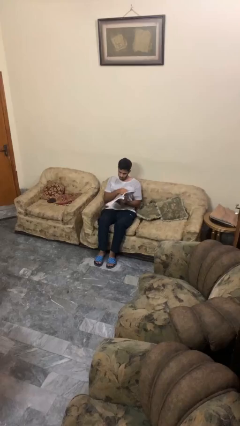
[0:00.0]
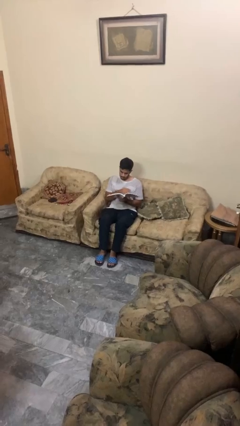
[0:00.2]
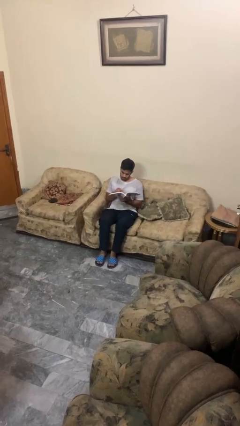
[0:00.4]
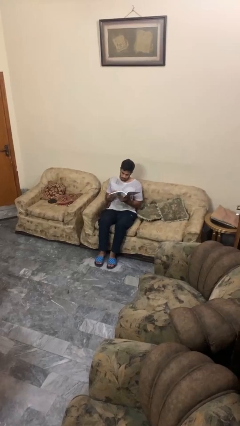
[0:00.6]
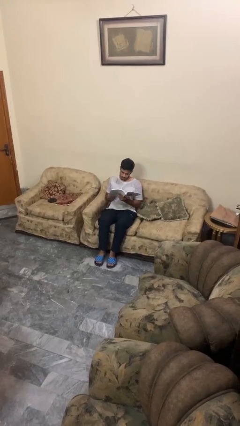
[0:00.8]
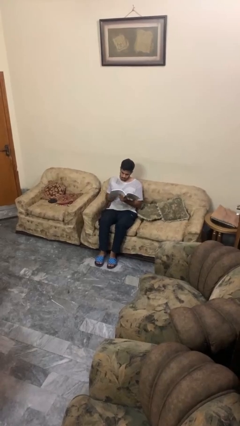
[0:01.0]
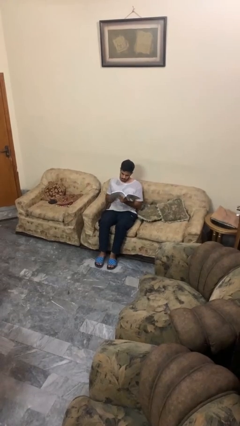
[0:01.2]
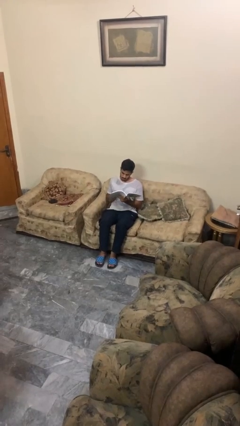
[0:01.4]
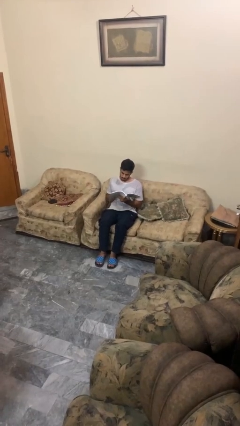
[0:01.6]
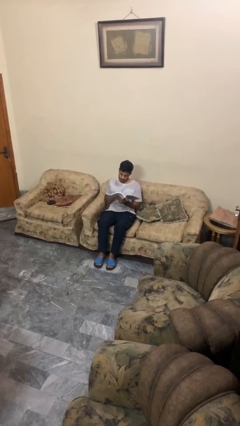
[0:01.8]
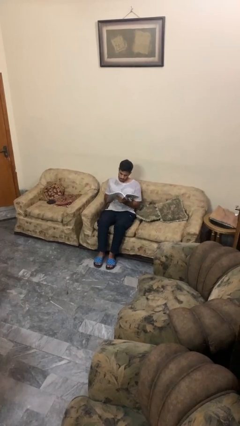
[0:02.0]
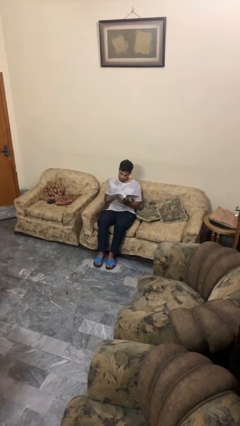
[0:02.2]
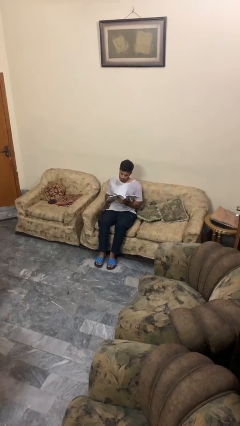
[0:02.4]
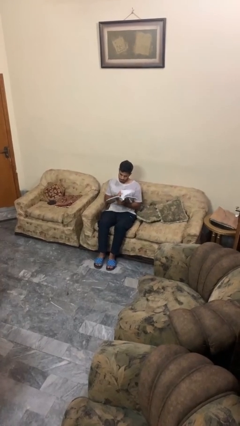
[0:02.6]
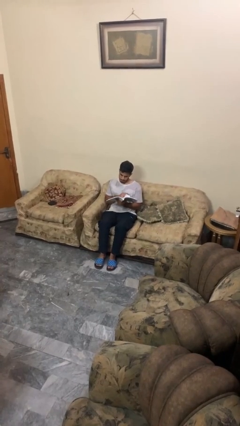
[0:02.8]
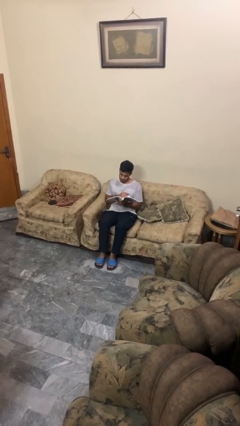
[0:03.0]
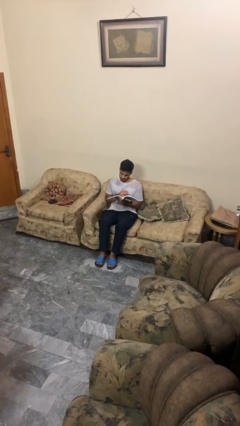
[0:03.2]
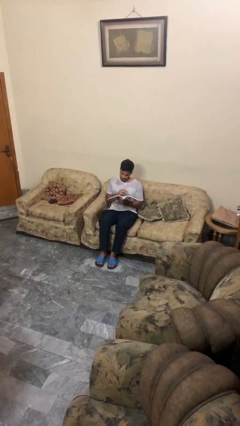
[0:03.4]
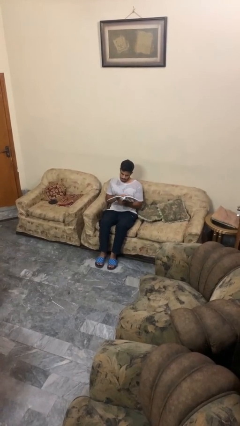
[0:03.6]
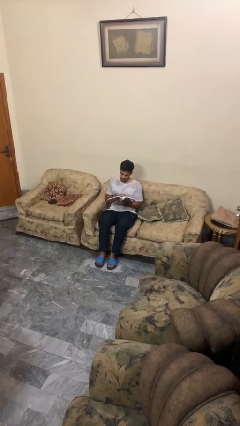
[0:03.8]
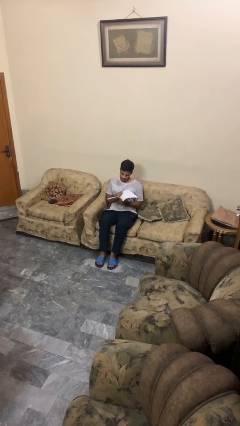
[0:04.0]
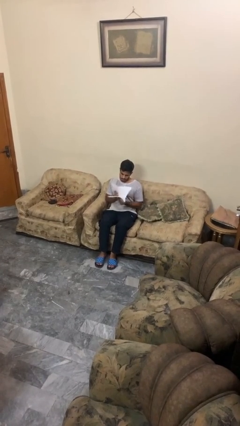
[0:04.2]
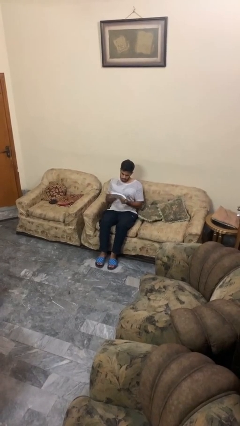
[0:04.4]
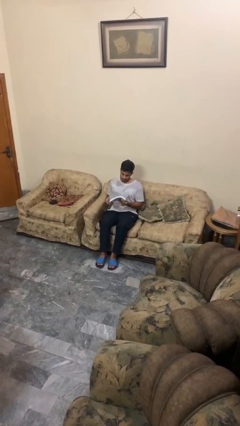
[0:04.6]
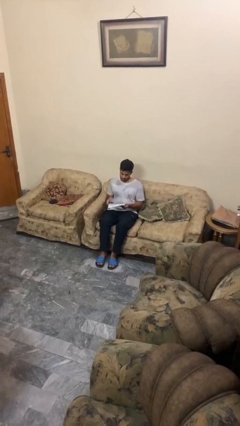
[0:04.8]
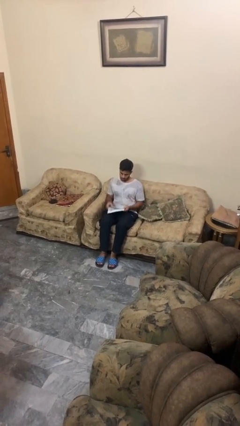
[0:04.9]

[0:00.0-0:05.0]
person reads book

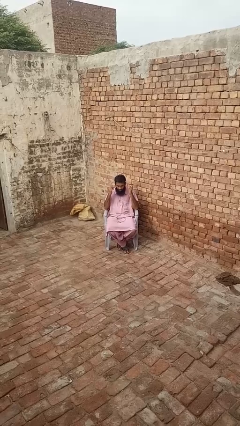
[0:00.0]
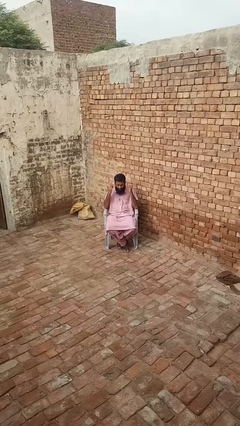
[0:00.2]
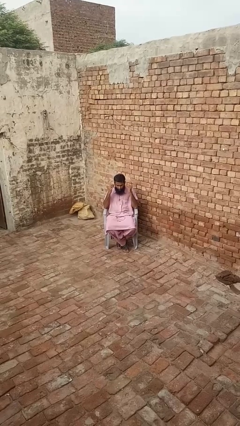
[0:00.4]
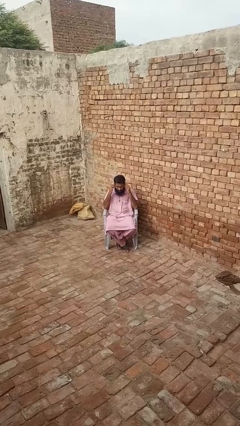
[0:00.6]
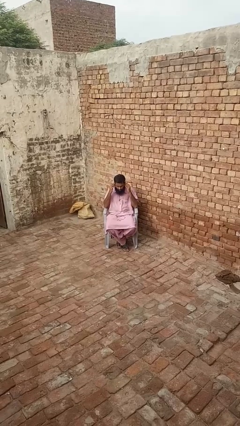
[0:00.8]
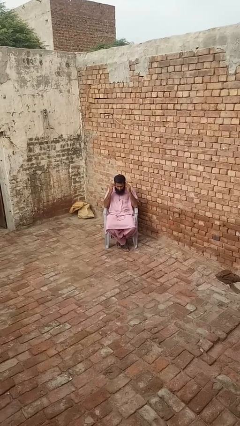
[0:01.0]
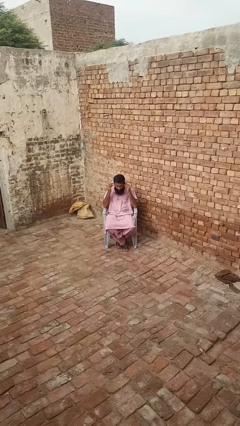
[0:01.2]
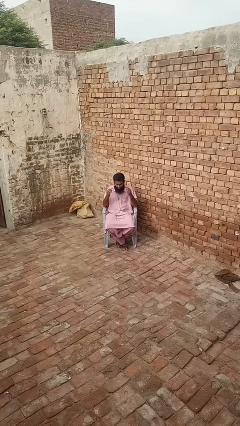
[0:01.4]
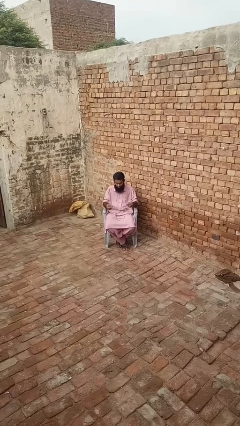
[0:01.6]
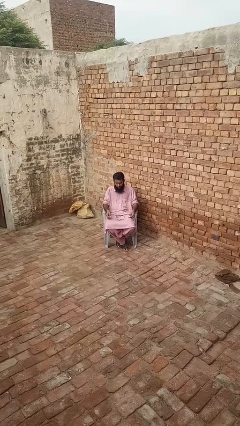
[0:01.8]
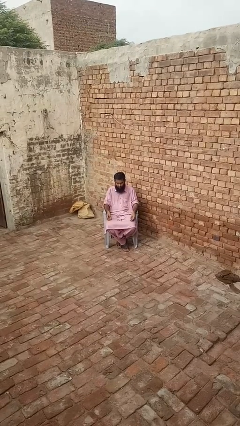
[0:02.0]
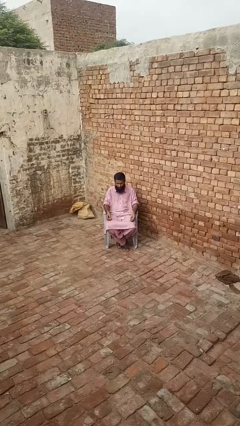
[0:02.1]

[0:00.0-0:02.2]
person takes off headphones

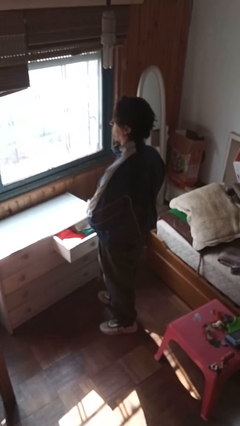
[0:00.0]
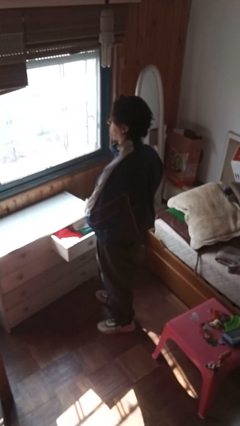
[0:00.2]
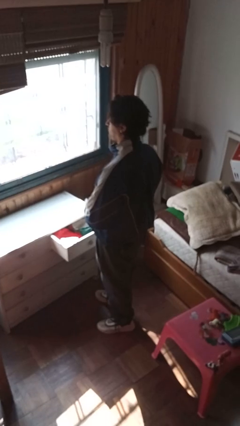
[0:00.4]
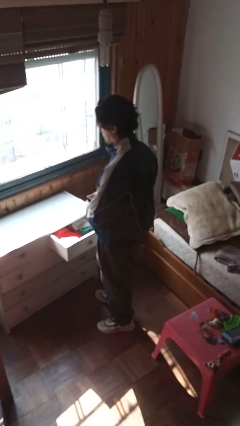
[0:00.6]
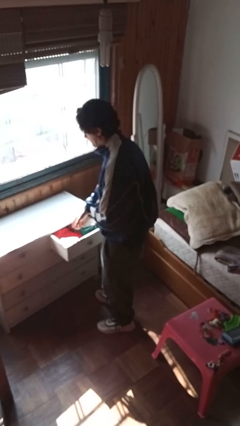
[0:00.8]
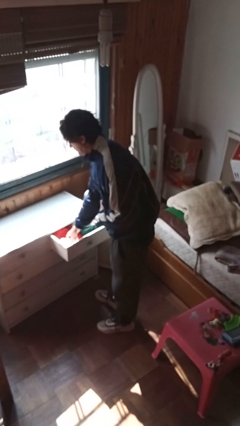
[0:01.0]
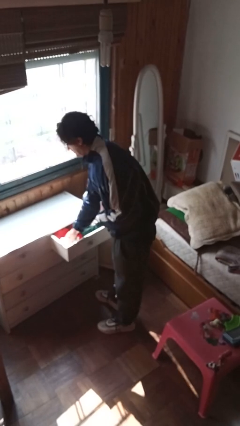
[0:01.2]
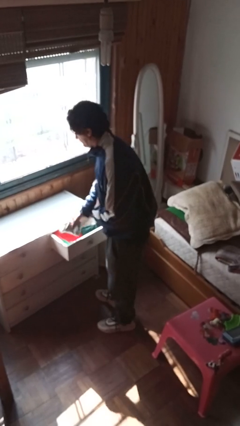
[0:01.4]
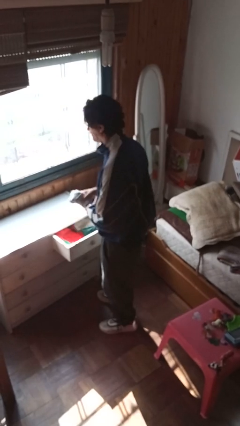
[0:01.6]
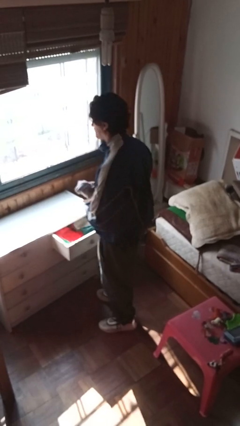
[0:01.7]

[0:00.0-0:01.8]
person takes clothes from dresser

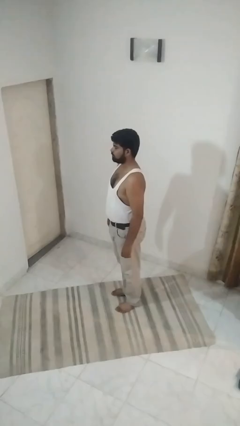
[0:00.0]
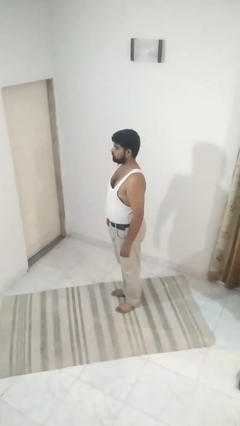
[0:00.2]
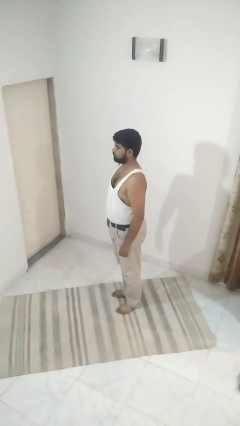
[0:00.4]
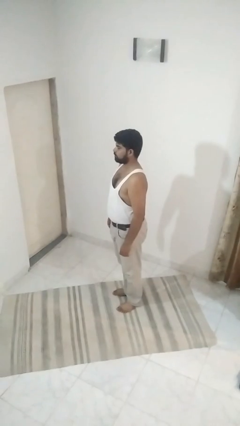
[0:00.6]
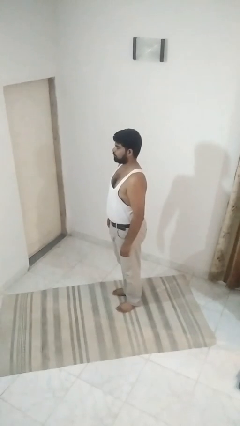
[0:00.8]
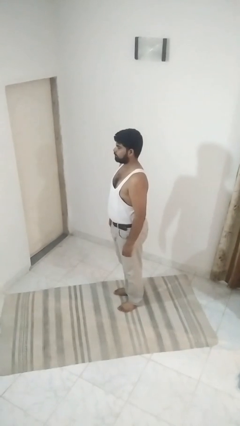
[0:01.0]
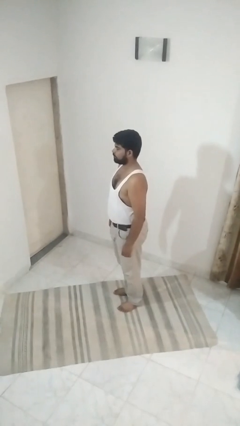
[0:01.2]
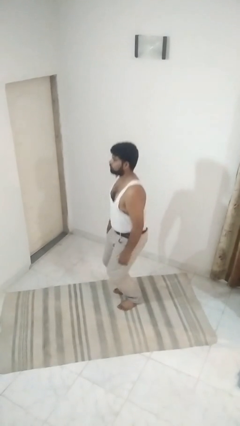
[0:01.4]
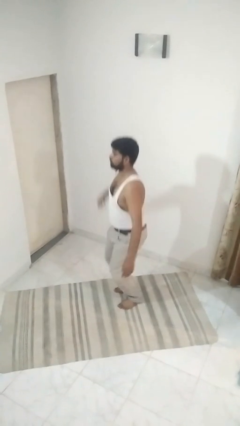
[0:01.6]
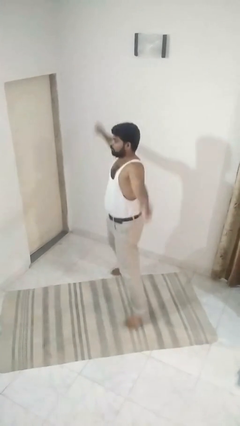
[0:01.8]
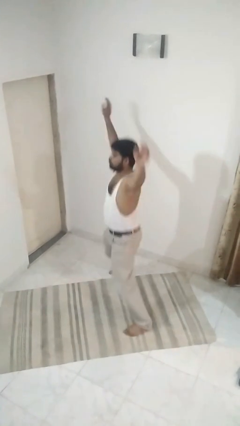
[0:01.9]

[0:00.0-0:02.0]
person exercises with jumping jacks

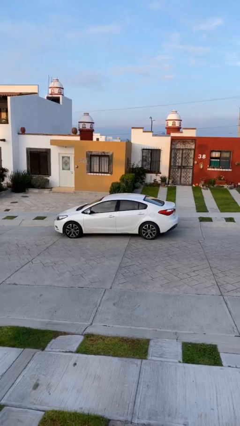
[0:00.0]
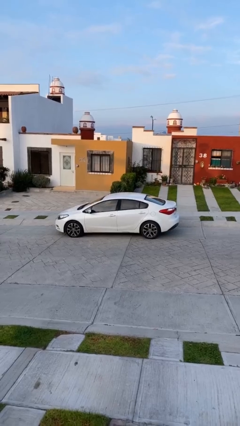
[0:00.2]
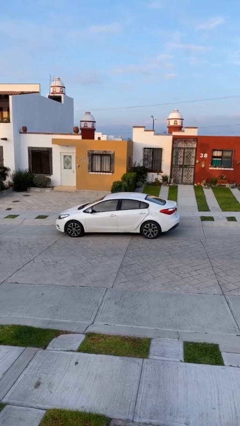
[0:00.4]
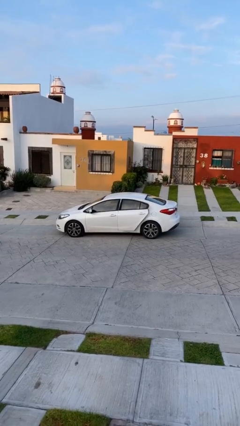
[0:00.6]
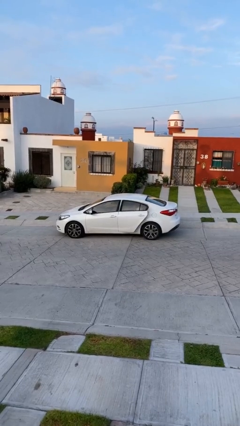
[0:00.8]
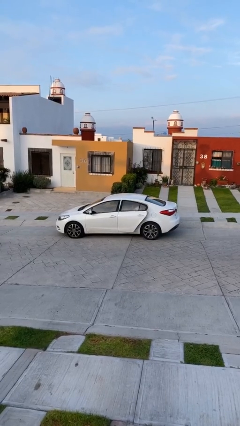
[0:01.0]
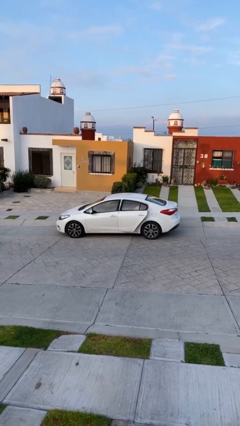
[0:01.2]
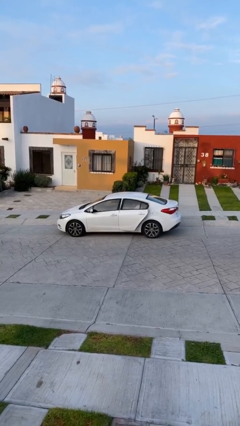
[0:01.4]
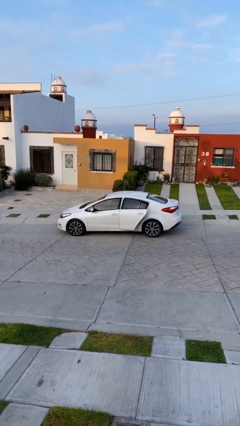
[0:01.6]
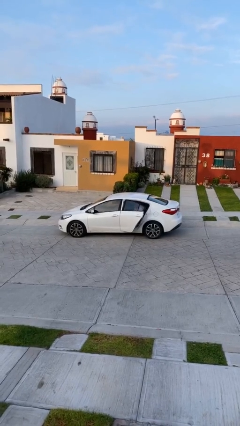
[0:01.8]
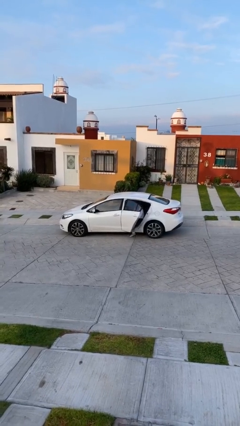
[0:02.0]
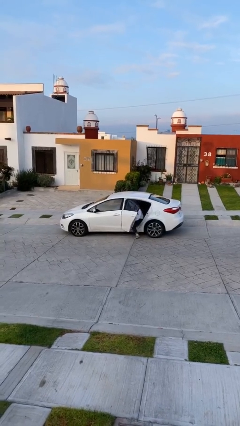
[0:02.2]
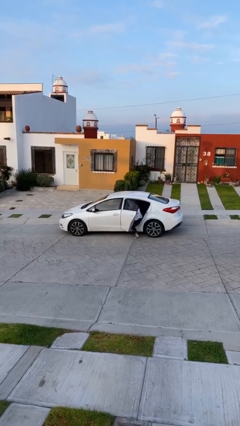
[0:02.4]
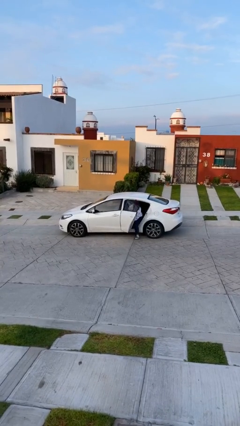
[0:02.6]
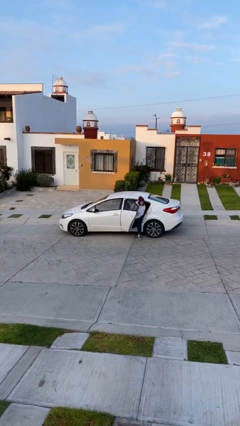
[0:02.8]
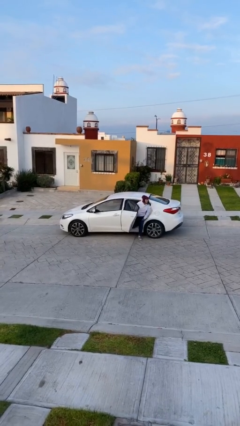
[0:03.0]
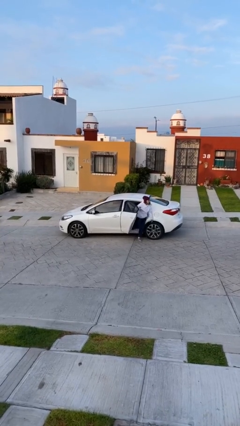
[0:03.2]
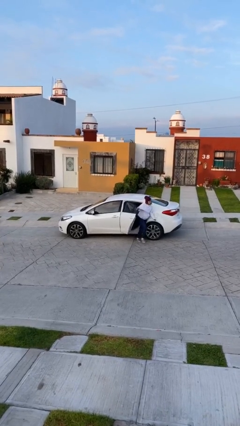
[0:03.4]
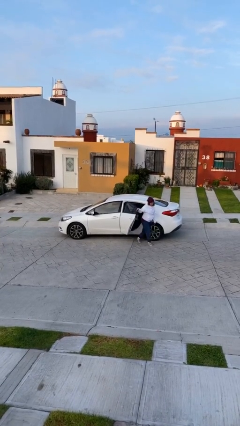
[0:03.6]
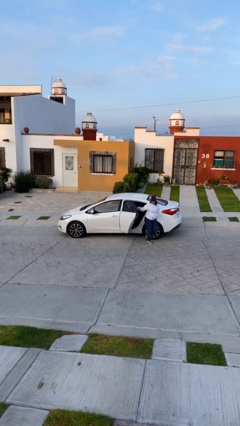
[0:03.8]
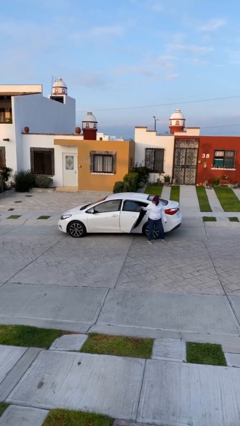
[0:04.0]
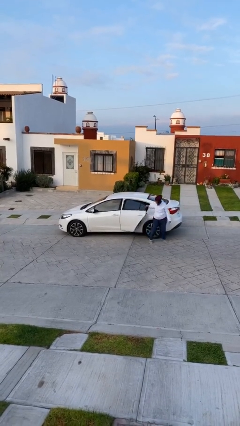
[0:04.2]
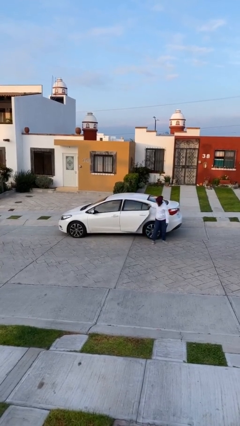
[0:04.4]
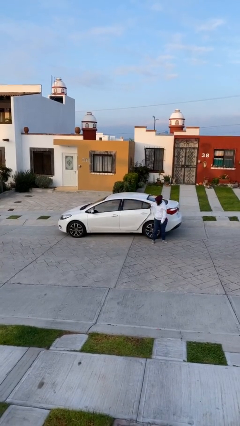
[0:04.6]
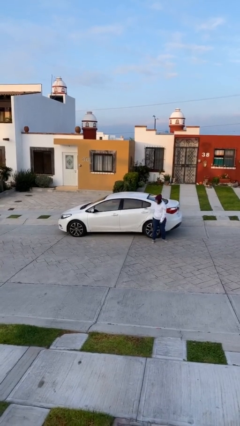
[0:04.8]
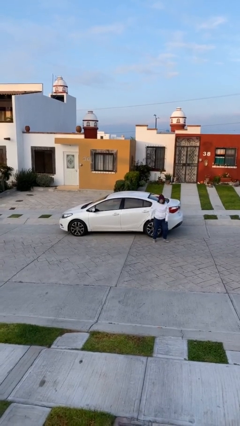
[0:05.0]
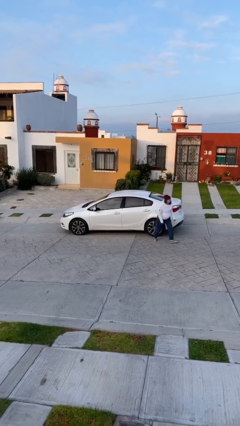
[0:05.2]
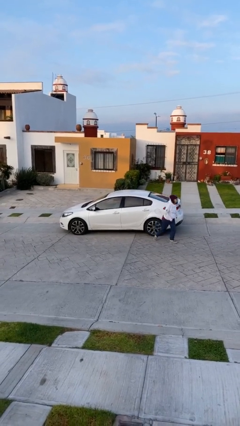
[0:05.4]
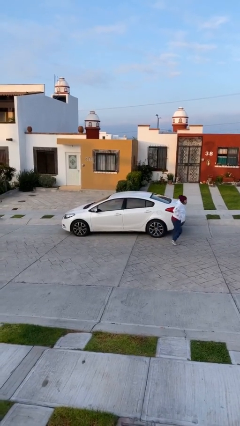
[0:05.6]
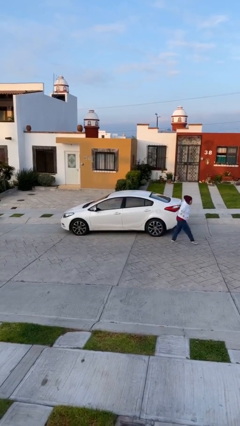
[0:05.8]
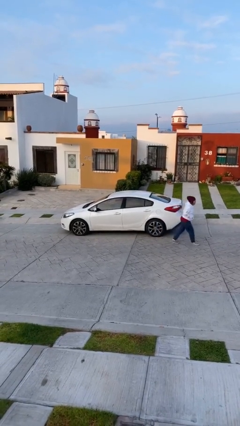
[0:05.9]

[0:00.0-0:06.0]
car drops off person

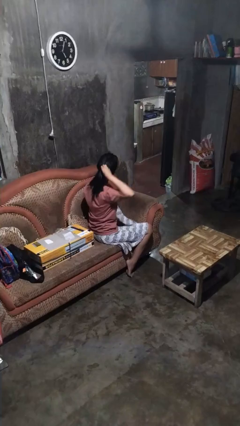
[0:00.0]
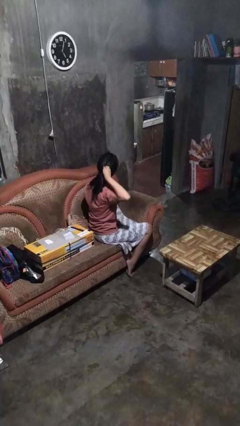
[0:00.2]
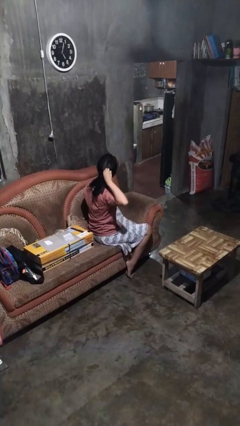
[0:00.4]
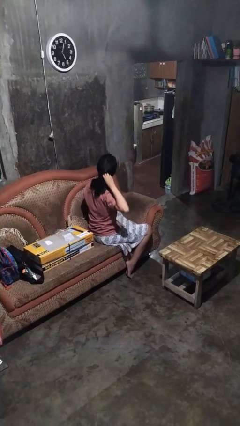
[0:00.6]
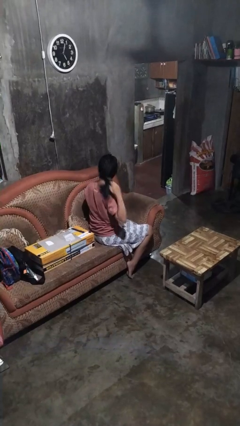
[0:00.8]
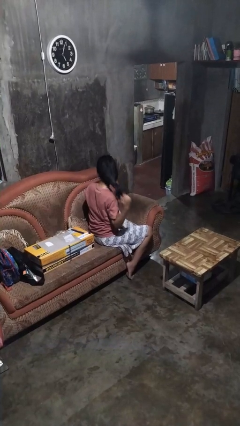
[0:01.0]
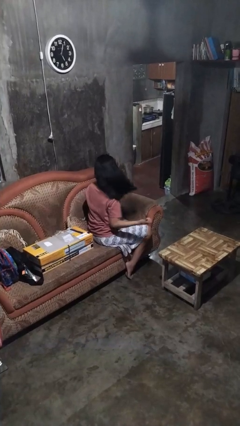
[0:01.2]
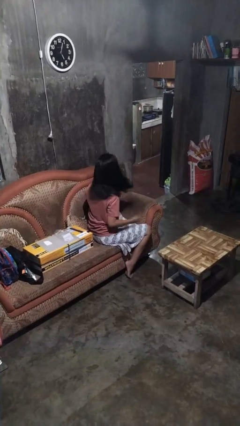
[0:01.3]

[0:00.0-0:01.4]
person takes off hairtie
